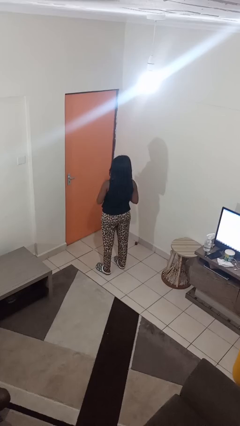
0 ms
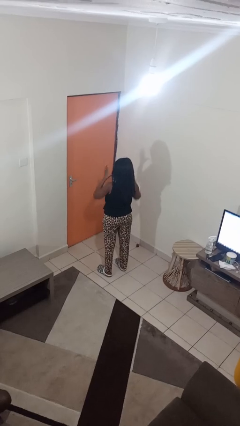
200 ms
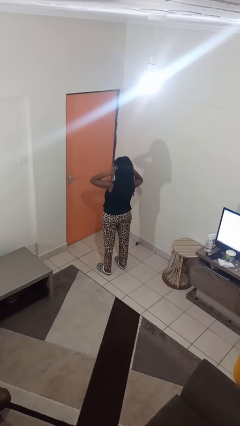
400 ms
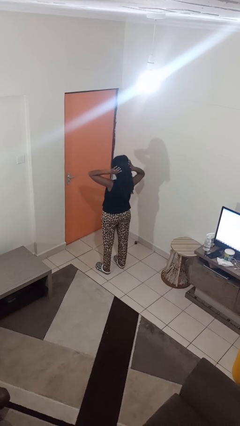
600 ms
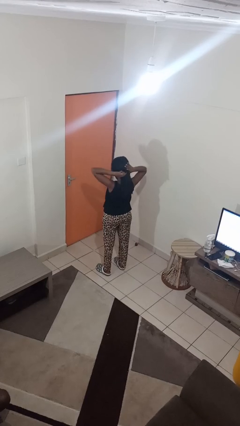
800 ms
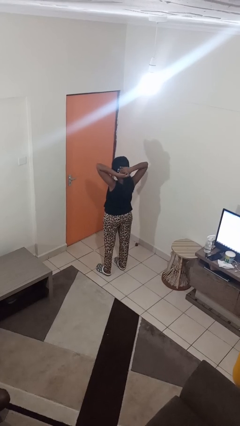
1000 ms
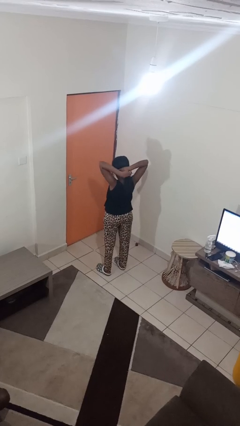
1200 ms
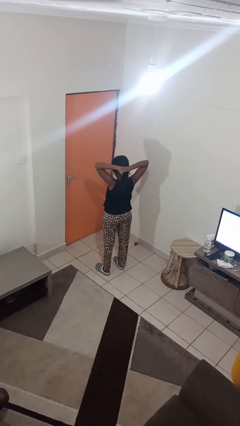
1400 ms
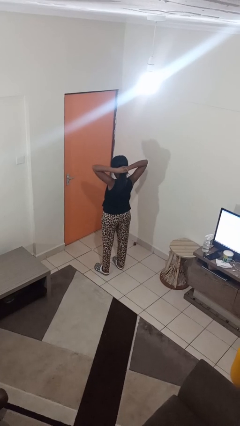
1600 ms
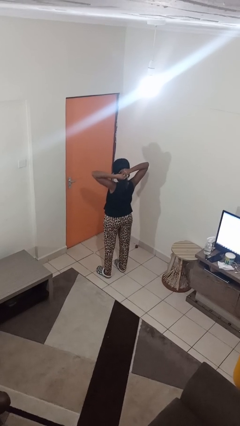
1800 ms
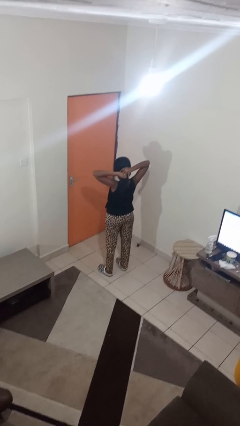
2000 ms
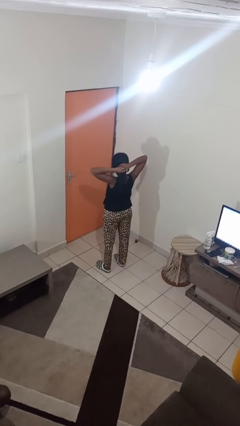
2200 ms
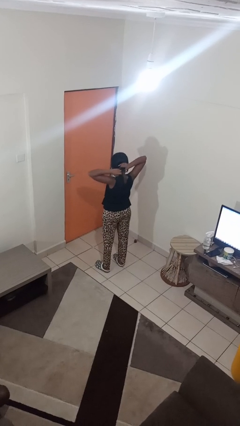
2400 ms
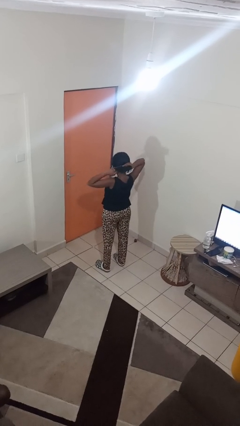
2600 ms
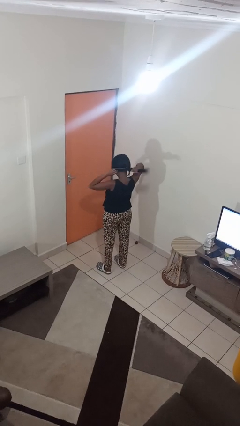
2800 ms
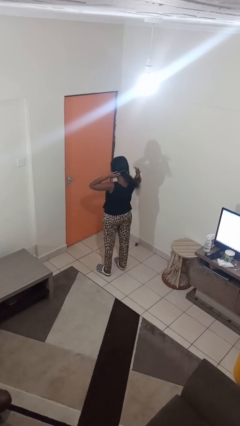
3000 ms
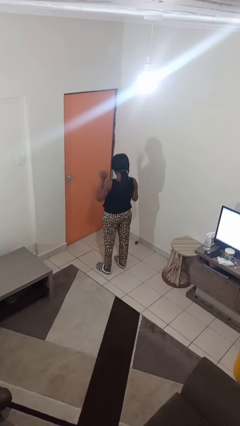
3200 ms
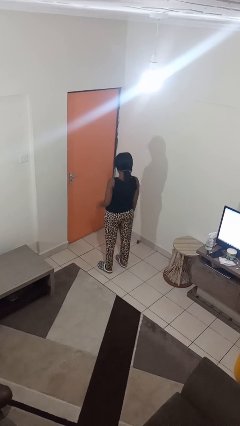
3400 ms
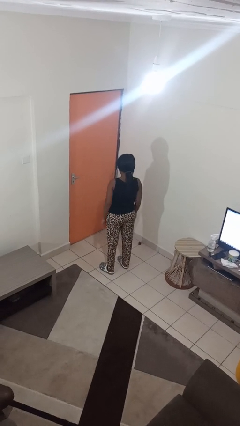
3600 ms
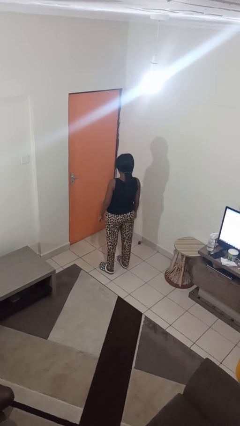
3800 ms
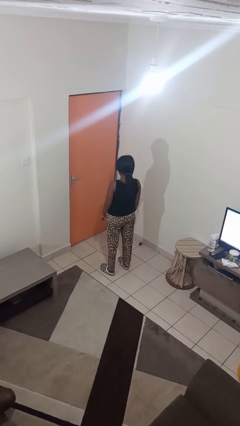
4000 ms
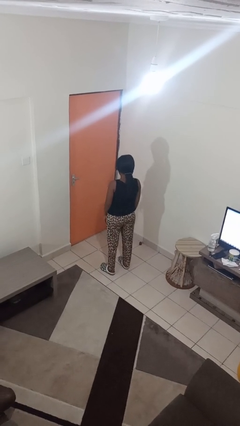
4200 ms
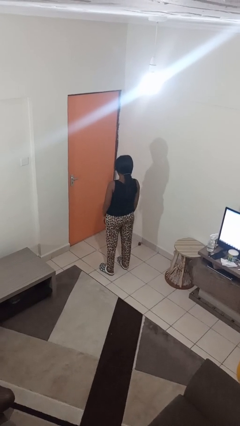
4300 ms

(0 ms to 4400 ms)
person puts hair in ponytail

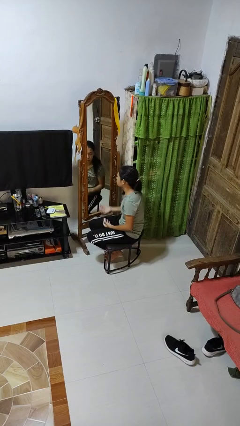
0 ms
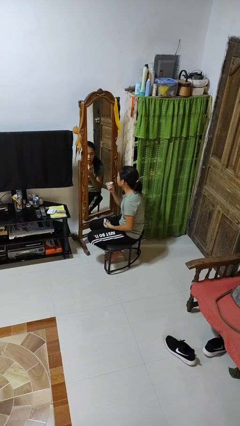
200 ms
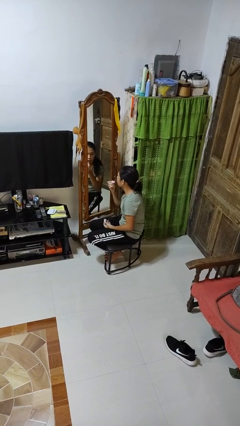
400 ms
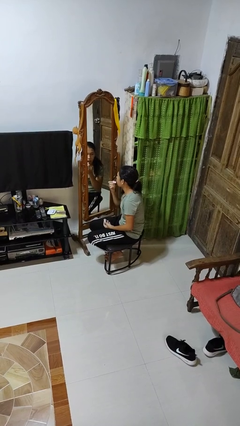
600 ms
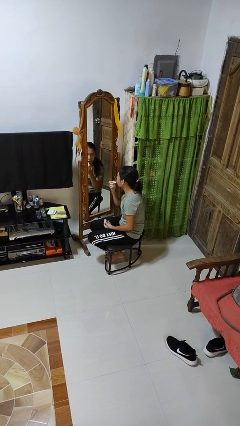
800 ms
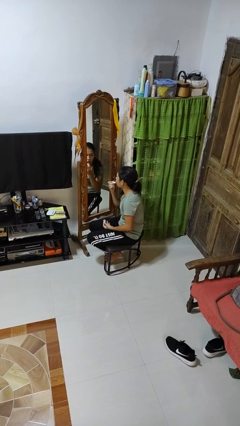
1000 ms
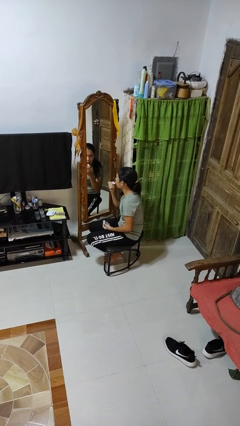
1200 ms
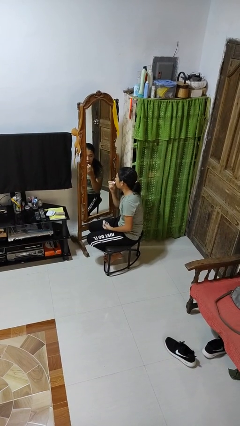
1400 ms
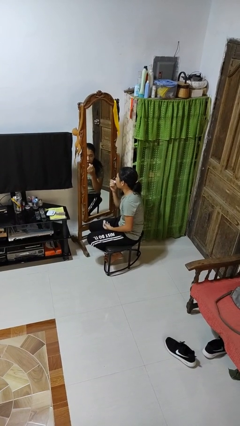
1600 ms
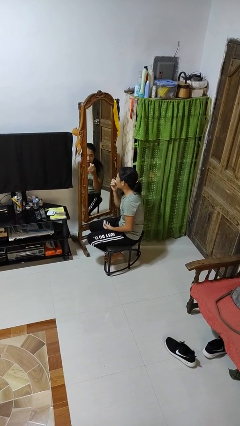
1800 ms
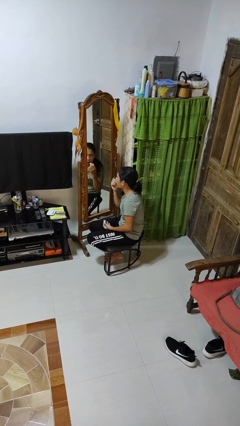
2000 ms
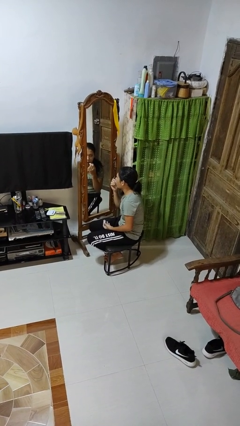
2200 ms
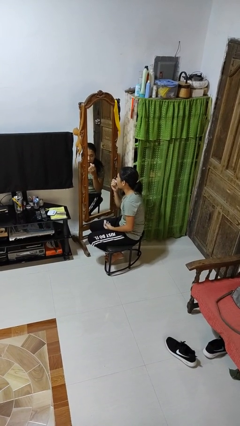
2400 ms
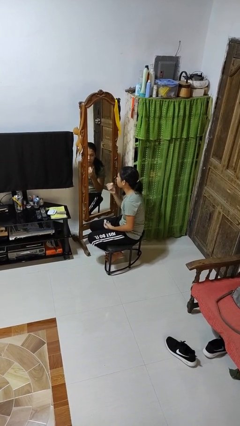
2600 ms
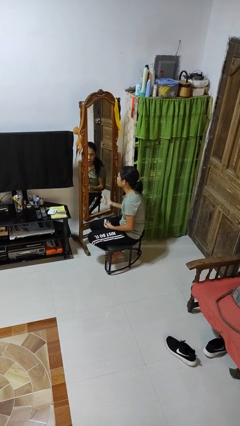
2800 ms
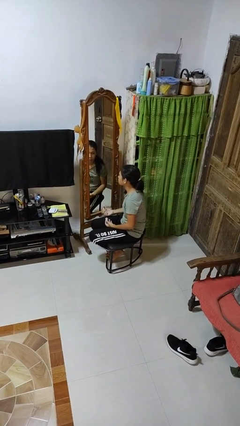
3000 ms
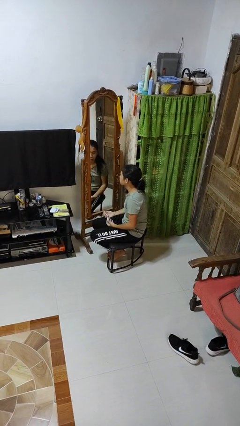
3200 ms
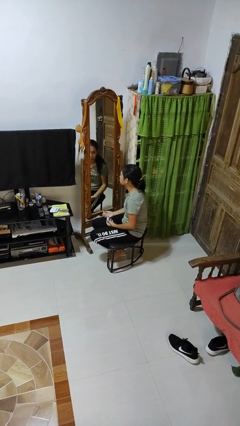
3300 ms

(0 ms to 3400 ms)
person applies lip makeup

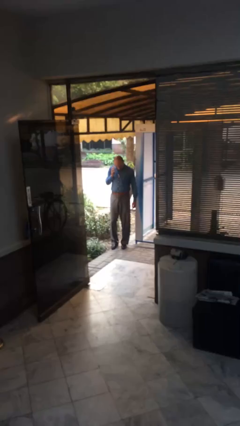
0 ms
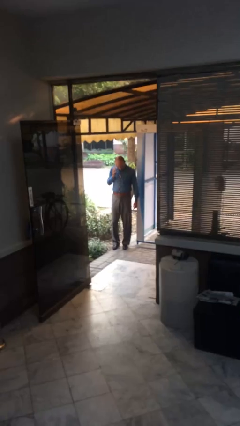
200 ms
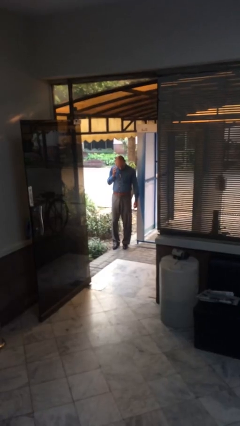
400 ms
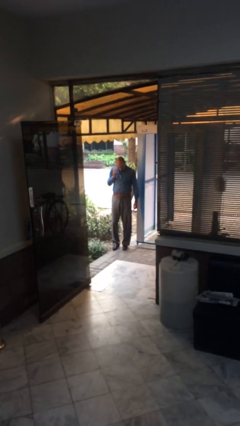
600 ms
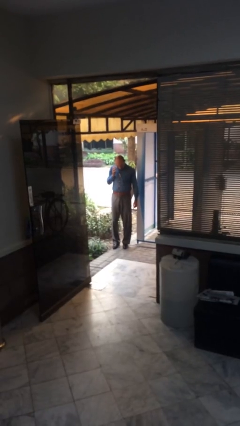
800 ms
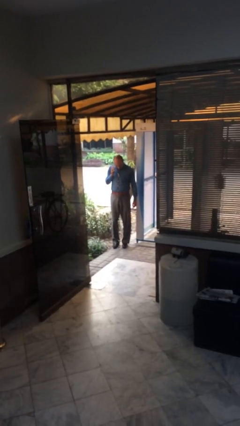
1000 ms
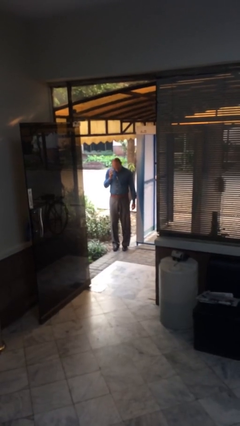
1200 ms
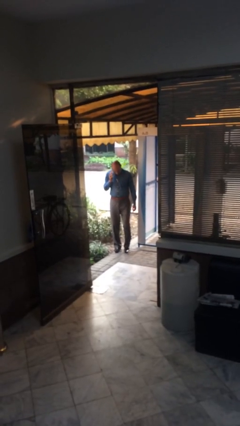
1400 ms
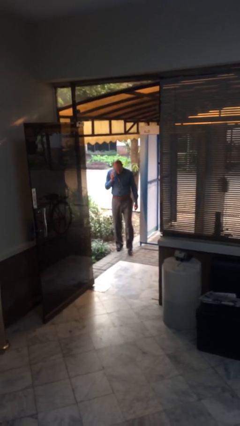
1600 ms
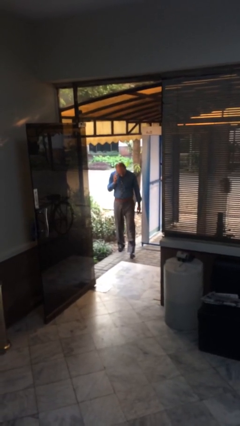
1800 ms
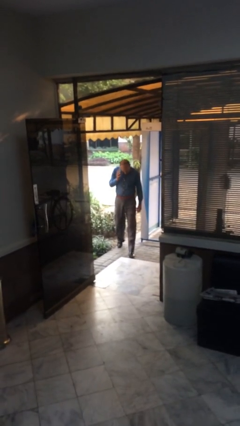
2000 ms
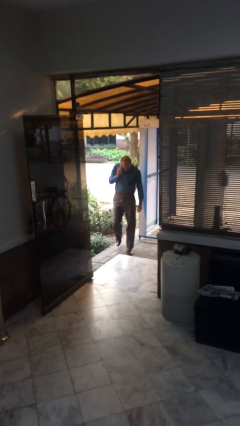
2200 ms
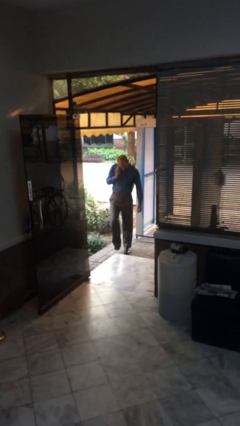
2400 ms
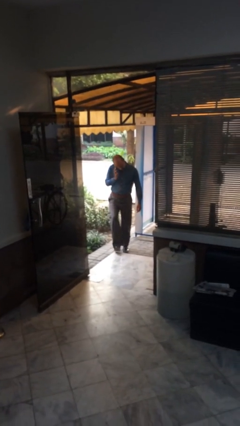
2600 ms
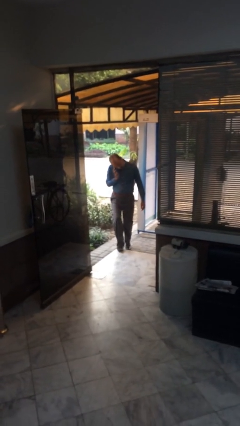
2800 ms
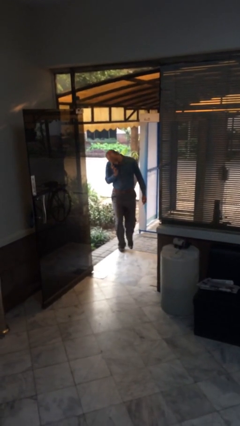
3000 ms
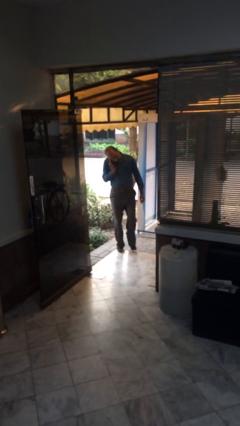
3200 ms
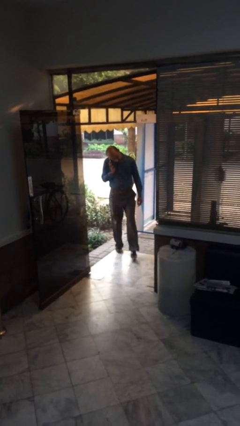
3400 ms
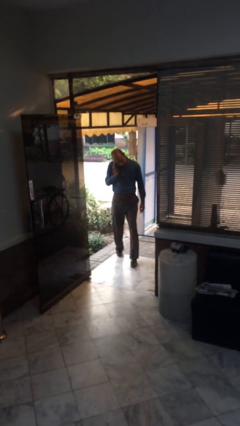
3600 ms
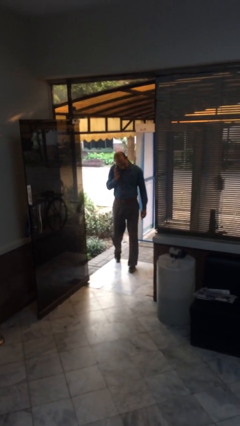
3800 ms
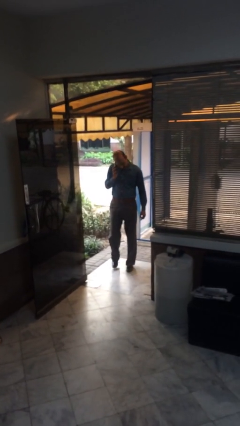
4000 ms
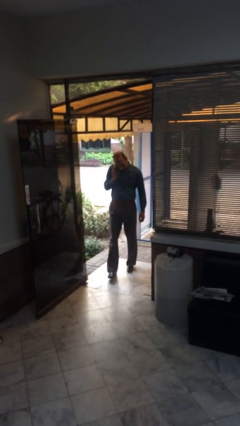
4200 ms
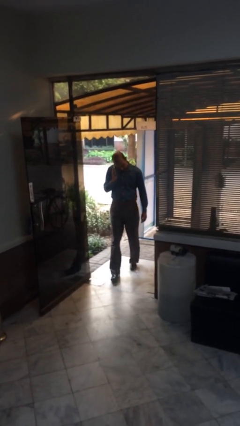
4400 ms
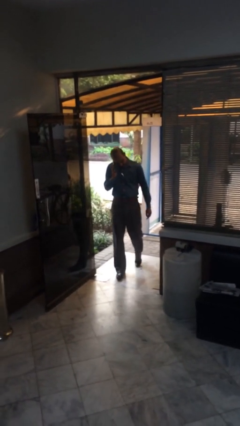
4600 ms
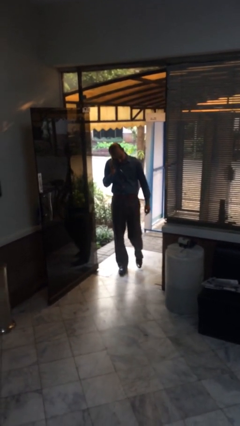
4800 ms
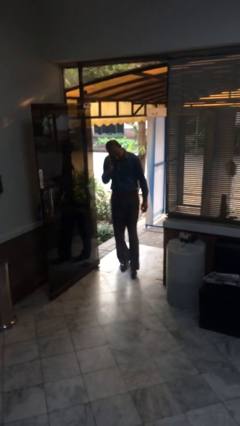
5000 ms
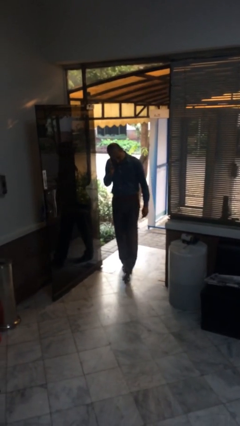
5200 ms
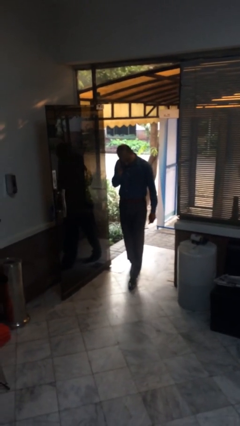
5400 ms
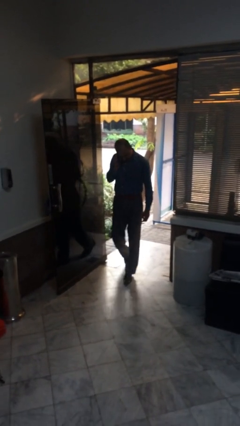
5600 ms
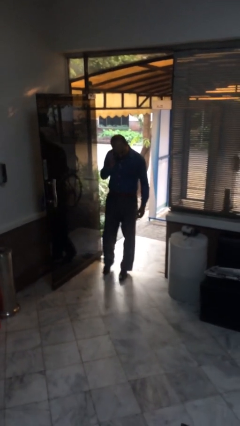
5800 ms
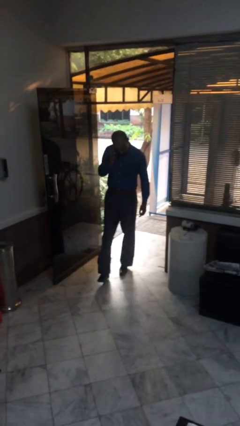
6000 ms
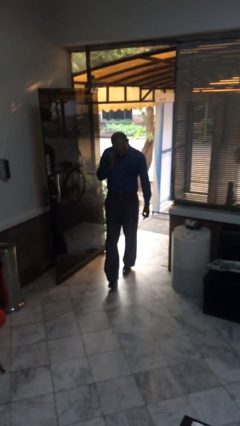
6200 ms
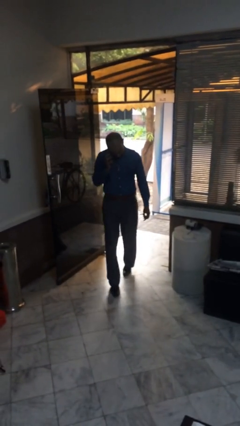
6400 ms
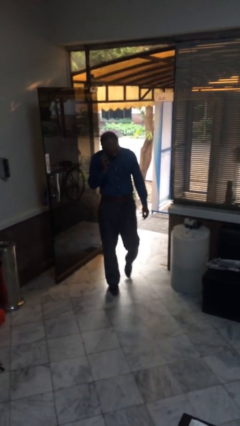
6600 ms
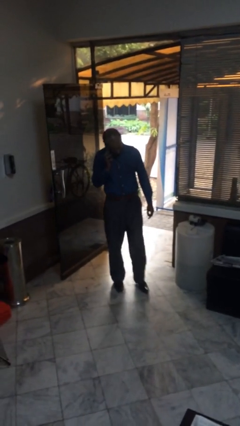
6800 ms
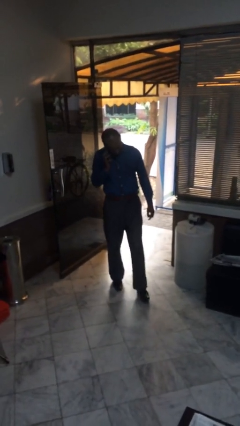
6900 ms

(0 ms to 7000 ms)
person enters scene through structure

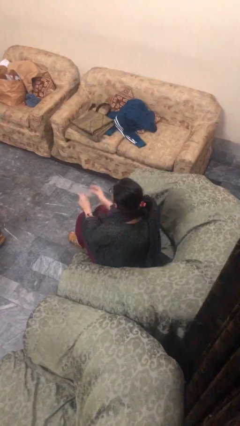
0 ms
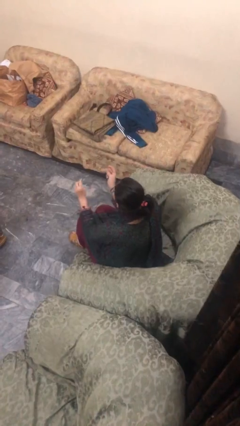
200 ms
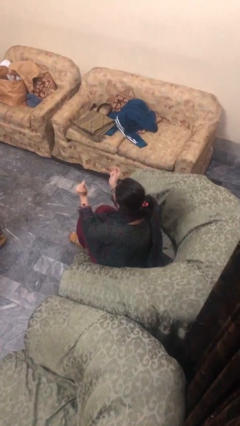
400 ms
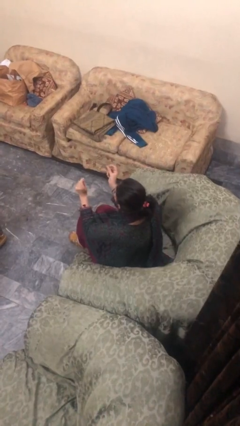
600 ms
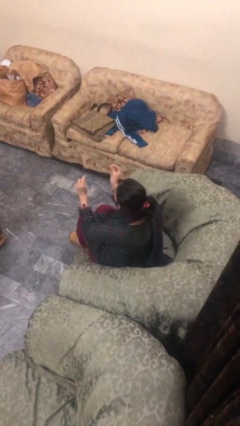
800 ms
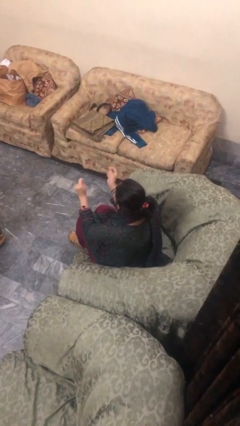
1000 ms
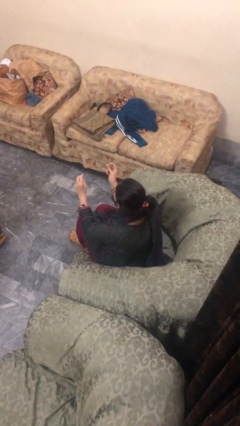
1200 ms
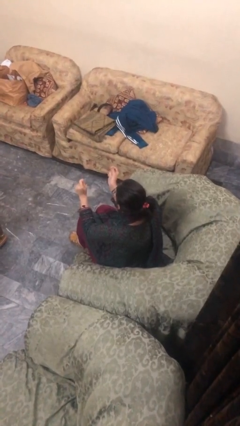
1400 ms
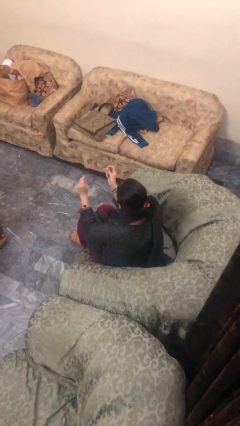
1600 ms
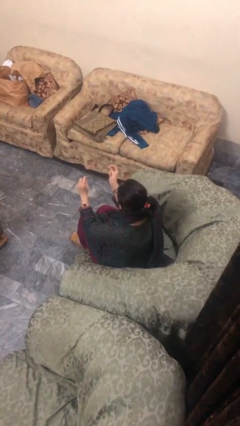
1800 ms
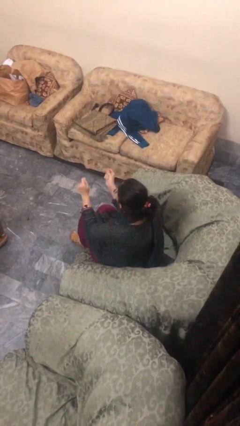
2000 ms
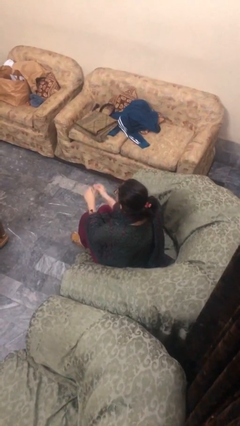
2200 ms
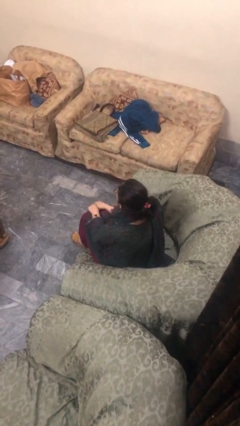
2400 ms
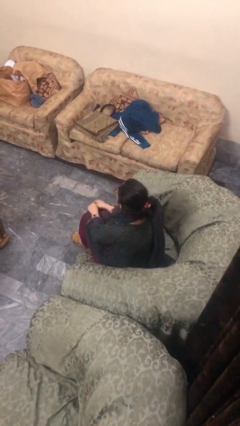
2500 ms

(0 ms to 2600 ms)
person snaps fingers

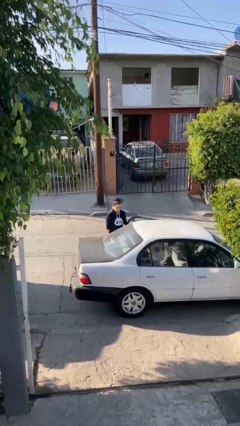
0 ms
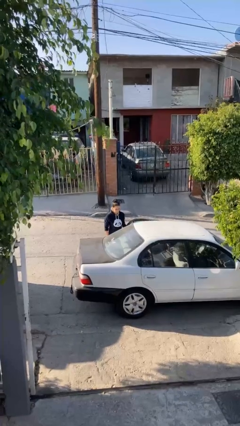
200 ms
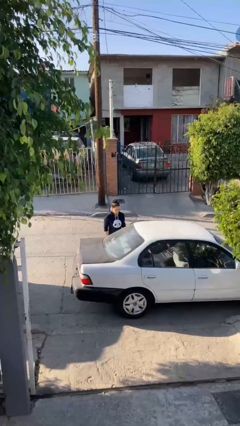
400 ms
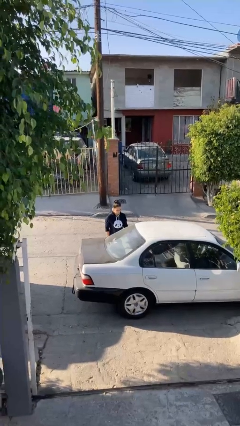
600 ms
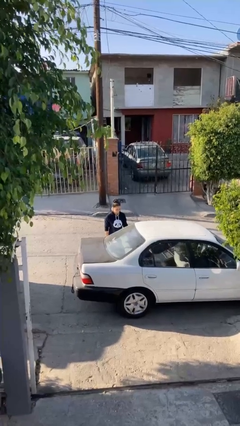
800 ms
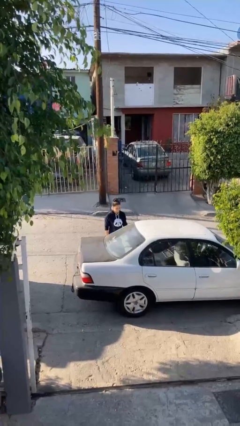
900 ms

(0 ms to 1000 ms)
person closes car door
